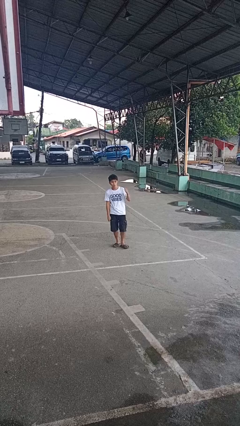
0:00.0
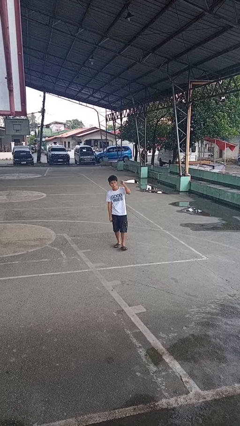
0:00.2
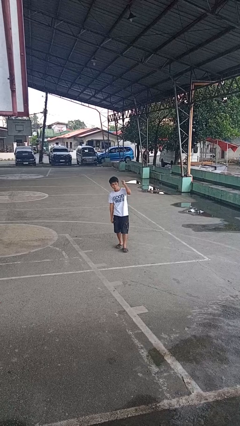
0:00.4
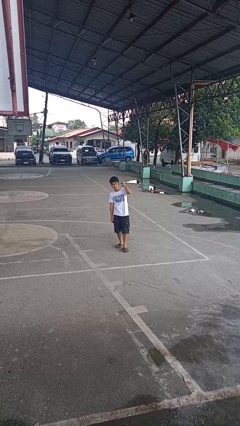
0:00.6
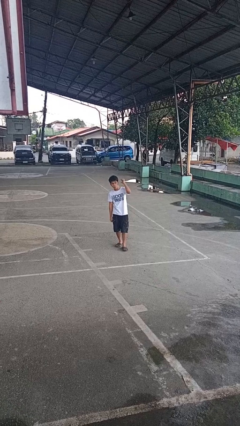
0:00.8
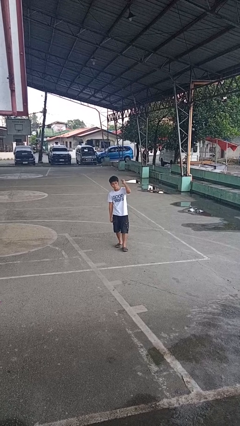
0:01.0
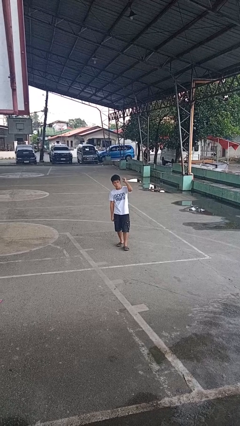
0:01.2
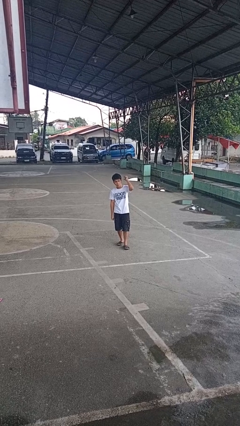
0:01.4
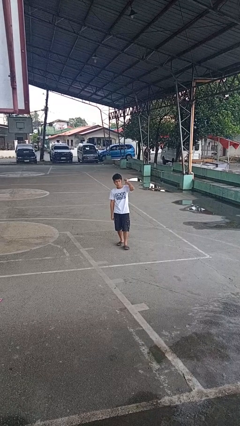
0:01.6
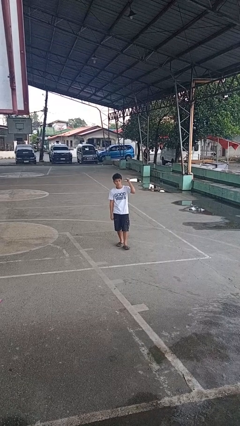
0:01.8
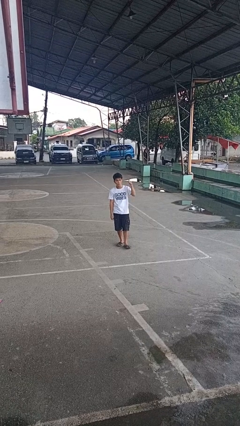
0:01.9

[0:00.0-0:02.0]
person gestures behind me

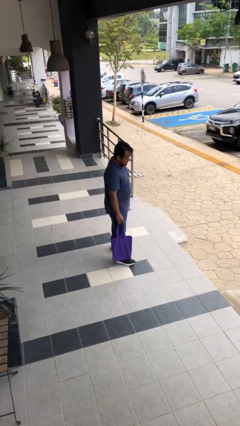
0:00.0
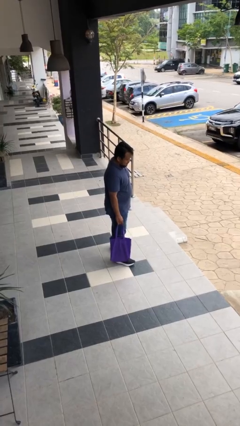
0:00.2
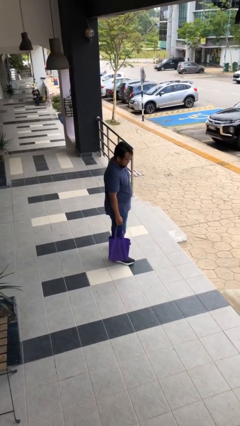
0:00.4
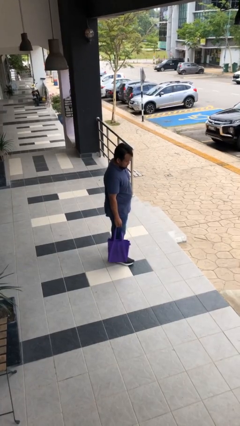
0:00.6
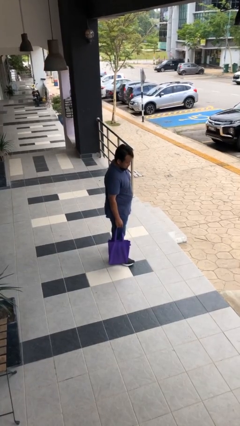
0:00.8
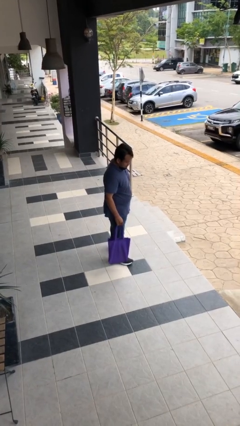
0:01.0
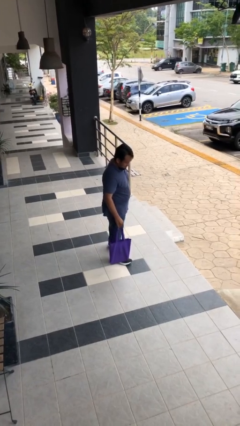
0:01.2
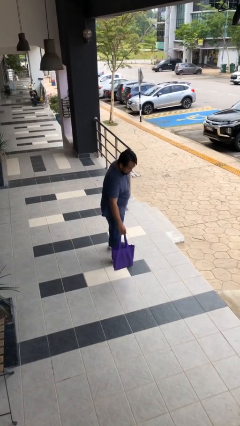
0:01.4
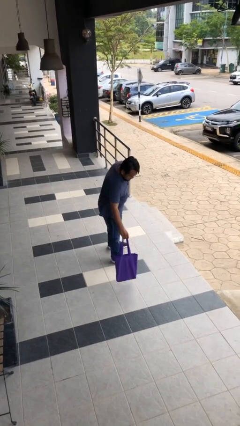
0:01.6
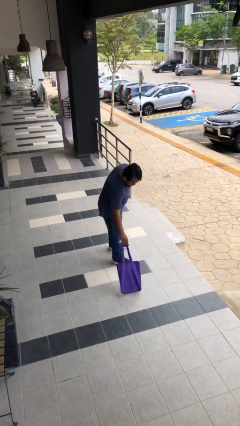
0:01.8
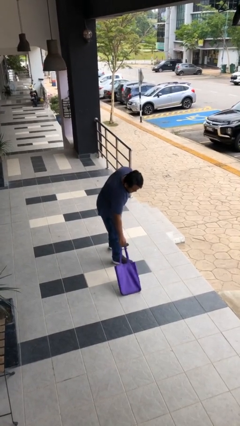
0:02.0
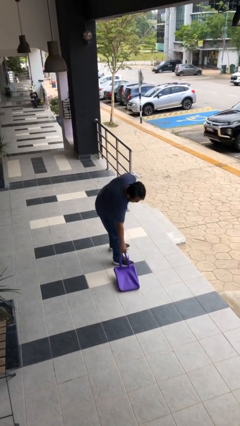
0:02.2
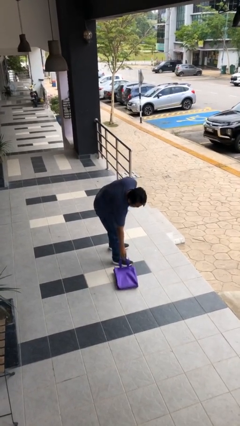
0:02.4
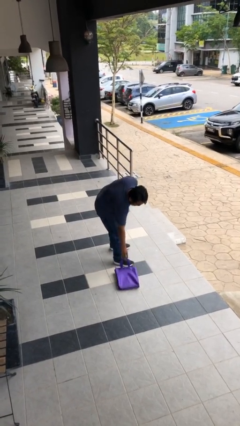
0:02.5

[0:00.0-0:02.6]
person puts down object on floor

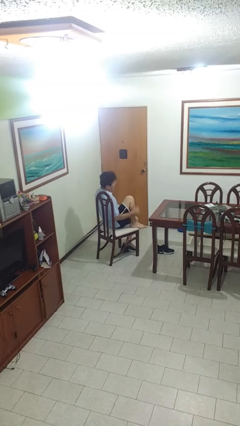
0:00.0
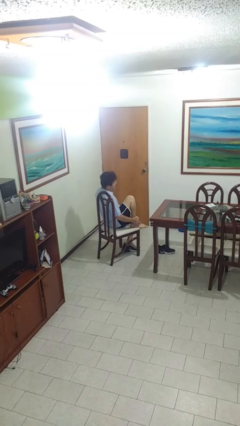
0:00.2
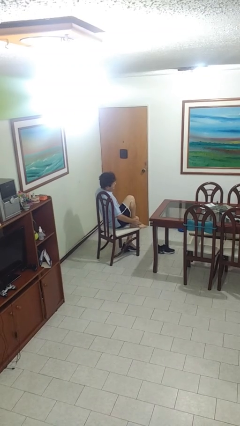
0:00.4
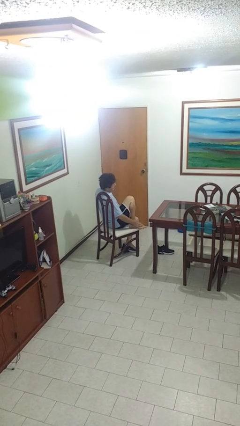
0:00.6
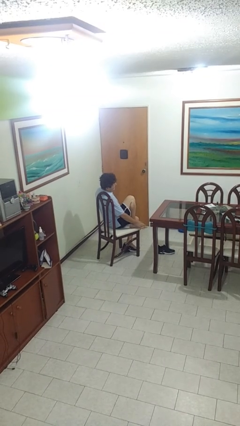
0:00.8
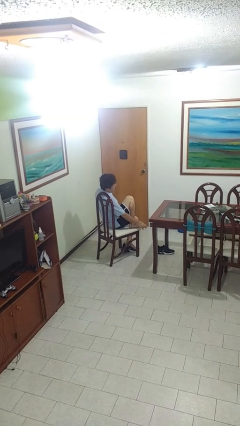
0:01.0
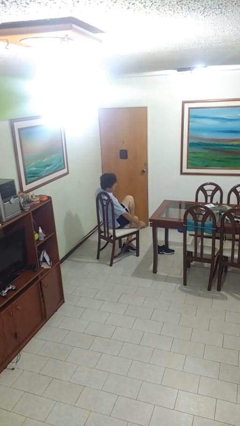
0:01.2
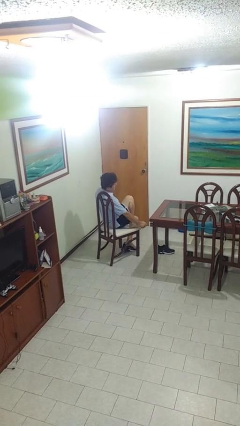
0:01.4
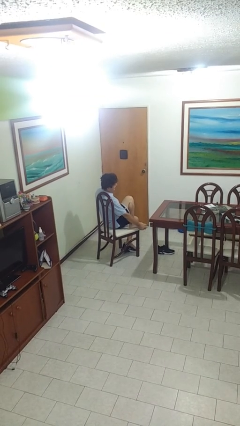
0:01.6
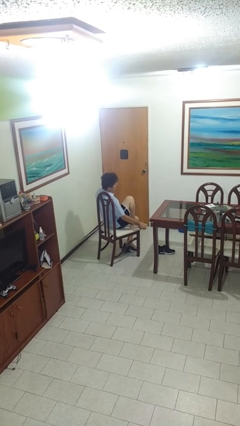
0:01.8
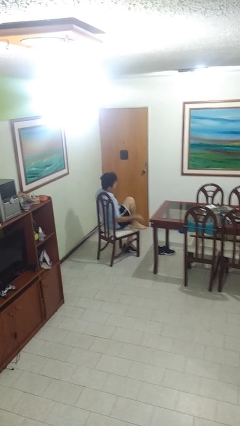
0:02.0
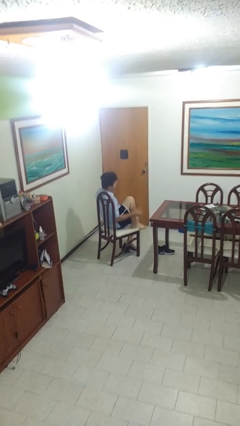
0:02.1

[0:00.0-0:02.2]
person rubs foot

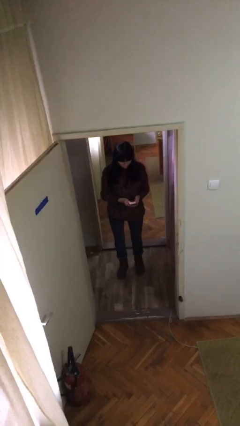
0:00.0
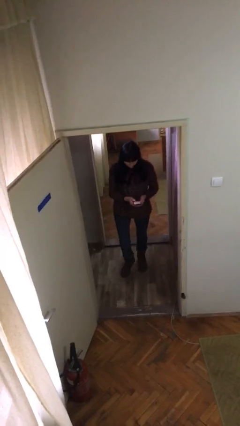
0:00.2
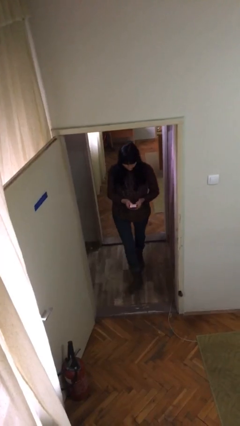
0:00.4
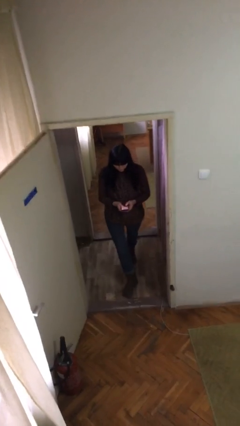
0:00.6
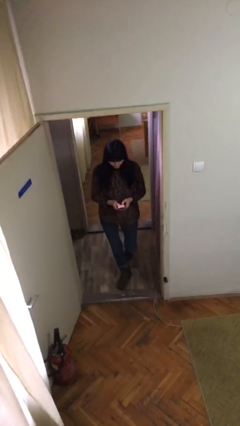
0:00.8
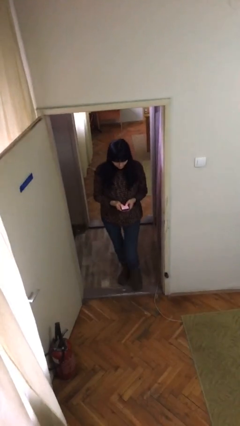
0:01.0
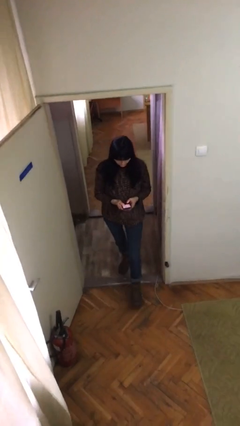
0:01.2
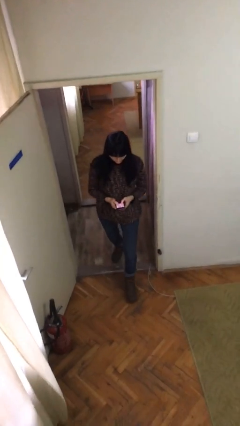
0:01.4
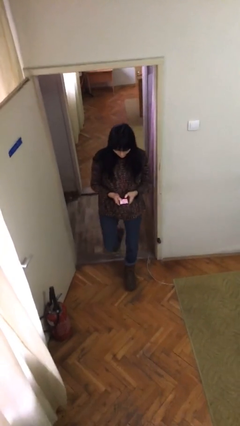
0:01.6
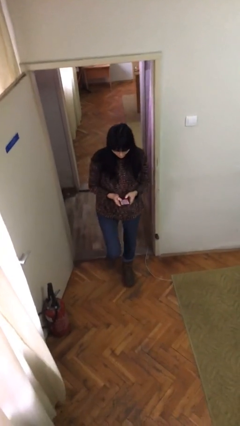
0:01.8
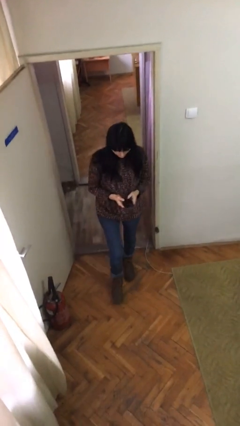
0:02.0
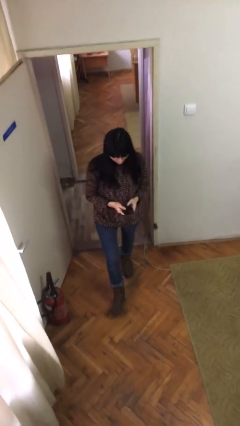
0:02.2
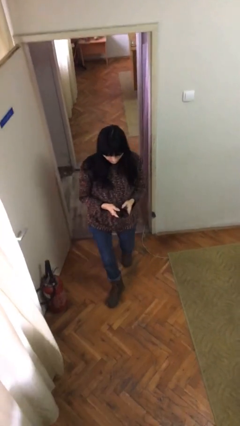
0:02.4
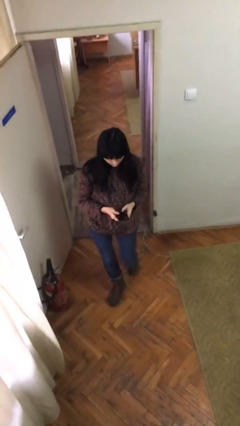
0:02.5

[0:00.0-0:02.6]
person enters scene through structure

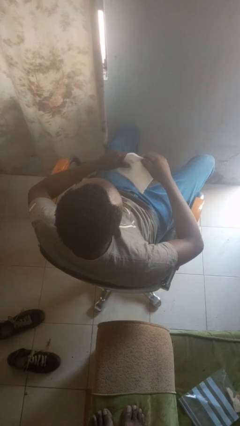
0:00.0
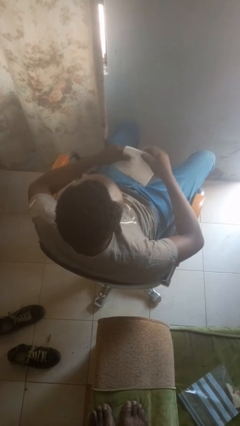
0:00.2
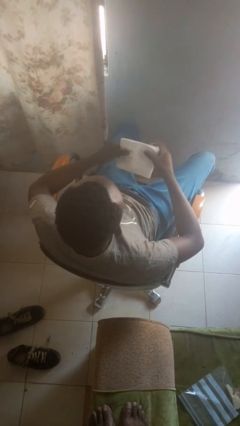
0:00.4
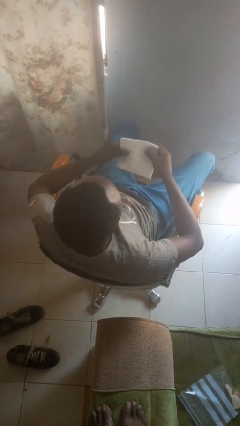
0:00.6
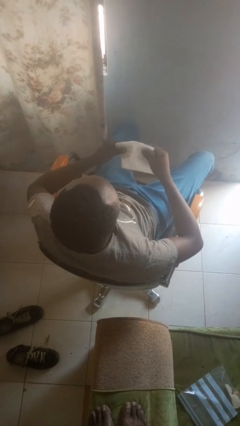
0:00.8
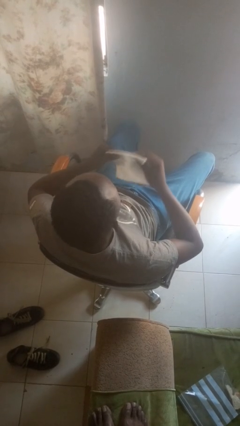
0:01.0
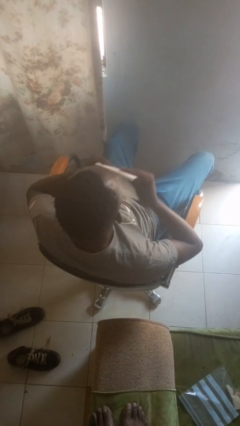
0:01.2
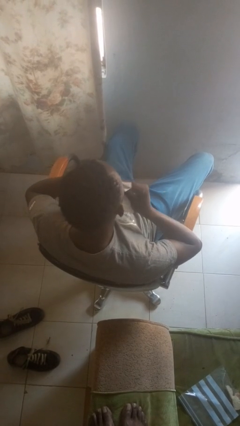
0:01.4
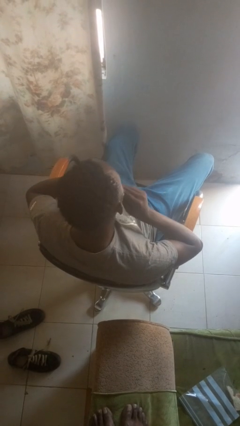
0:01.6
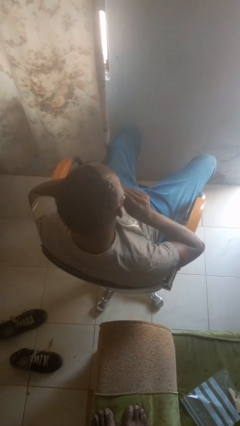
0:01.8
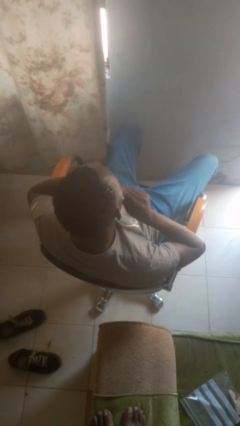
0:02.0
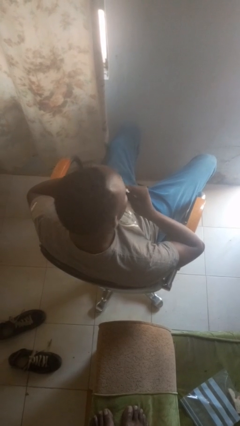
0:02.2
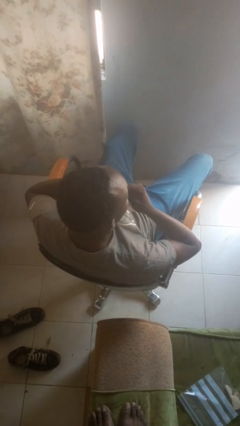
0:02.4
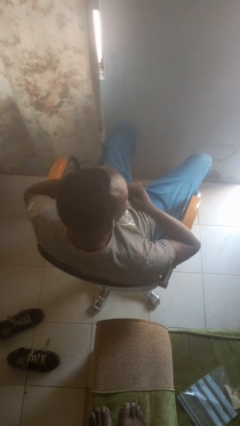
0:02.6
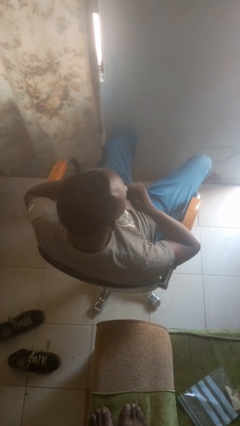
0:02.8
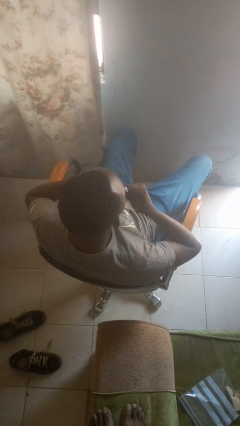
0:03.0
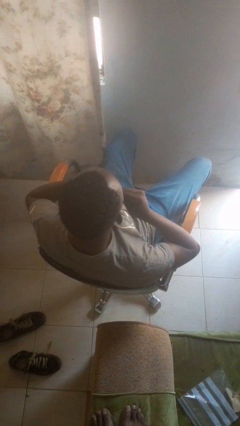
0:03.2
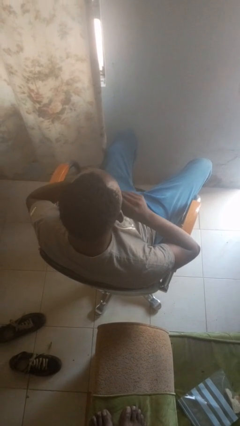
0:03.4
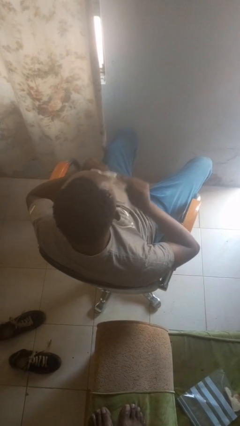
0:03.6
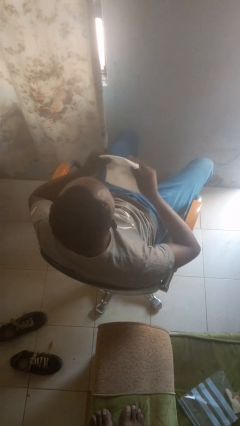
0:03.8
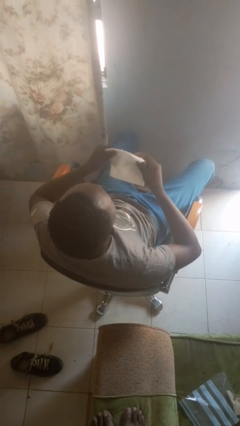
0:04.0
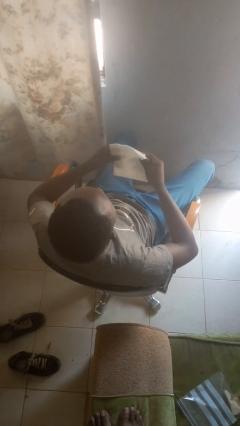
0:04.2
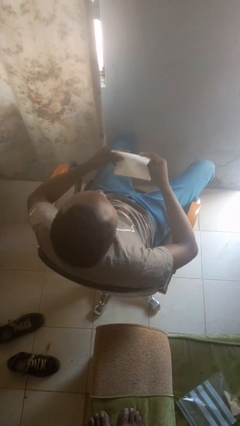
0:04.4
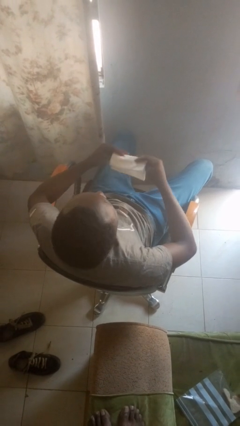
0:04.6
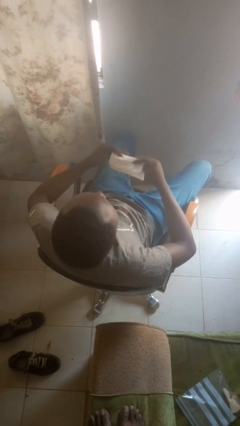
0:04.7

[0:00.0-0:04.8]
person wipes mouth with napkin

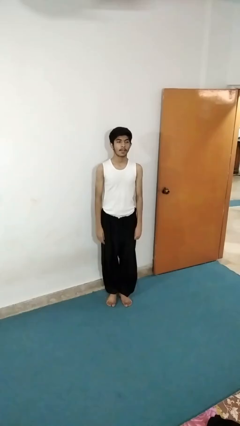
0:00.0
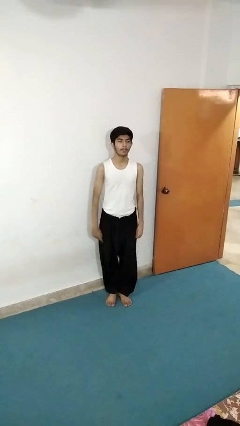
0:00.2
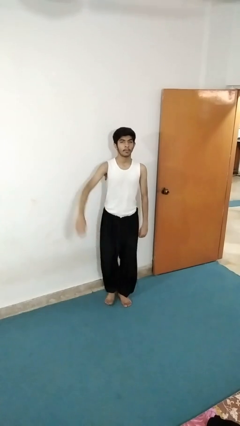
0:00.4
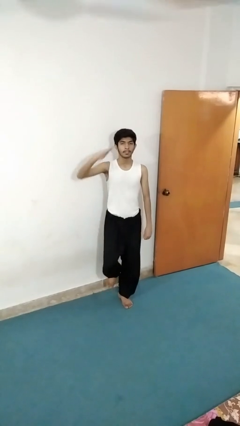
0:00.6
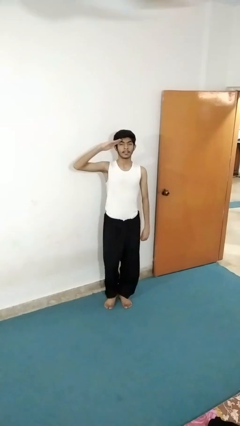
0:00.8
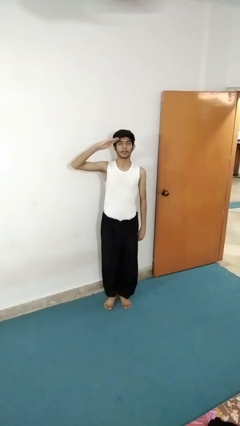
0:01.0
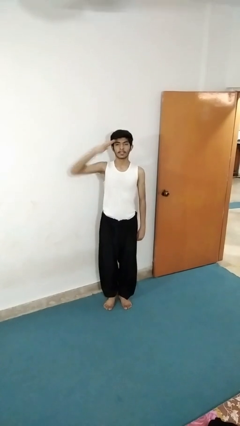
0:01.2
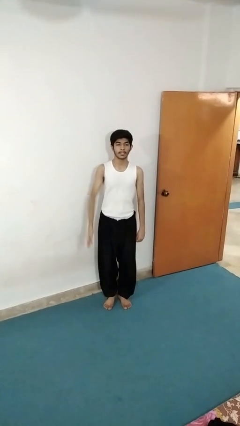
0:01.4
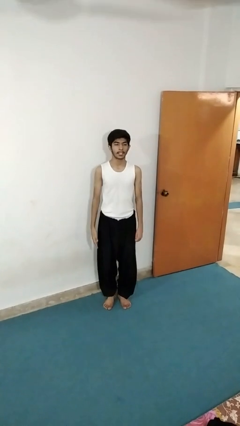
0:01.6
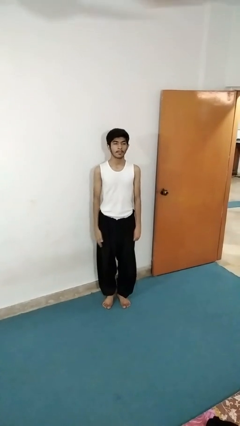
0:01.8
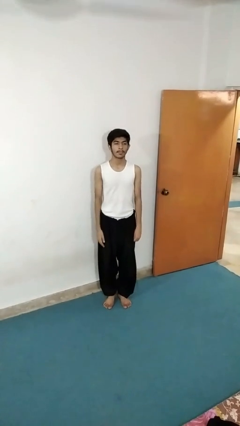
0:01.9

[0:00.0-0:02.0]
person salutes

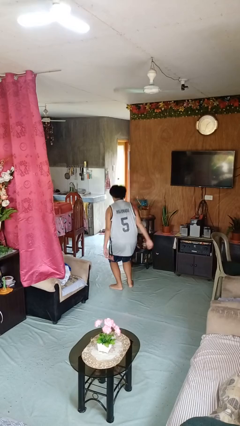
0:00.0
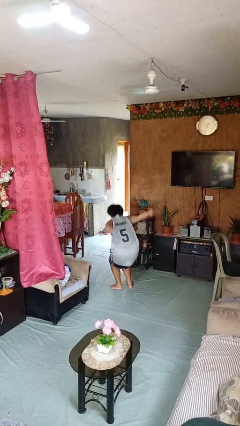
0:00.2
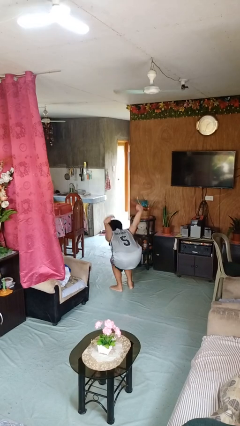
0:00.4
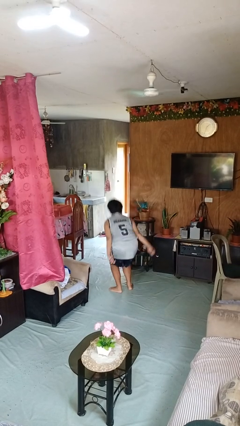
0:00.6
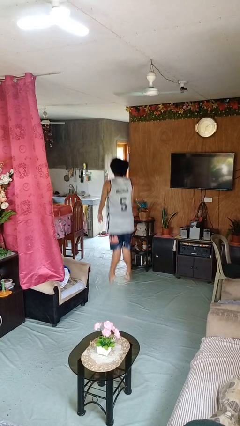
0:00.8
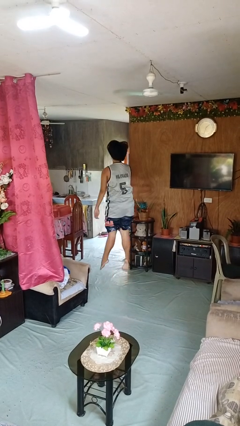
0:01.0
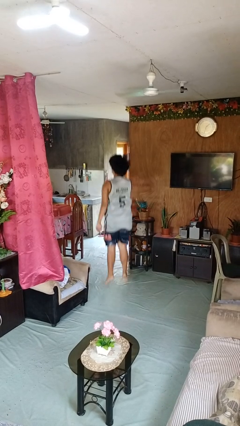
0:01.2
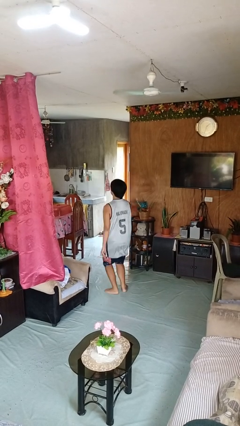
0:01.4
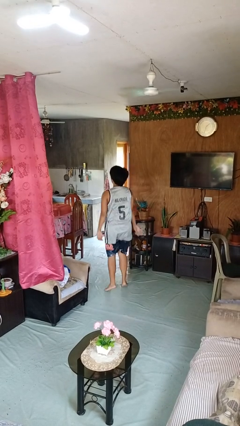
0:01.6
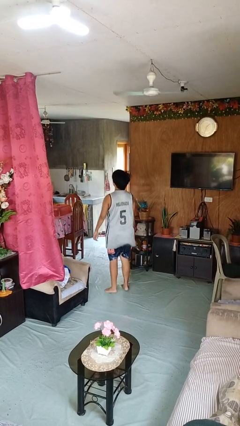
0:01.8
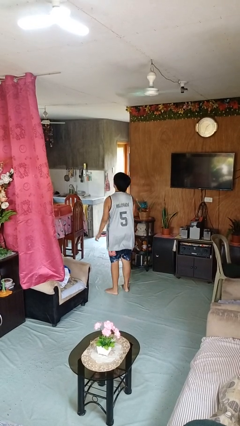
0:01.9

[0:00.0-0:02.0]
person jumps
